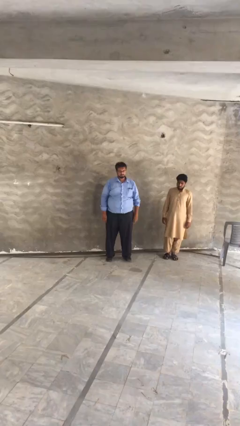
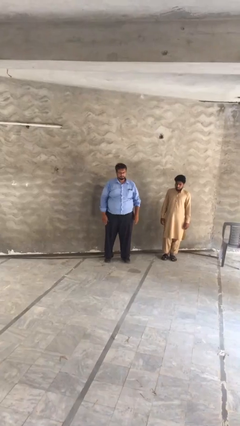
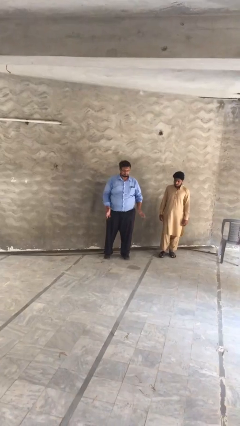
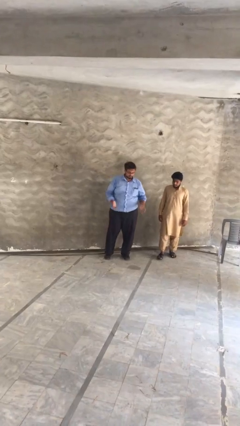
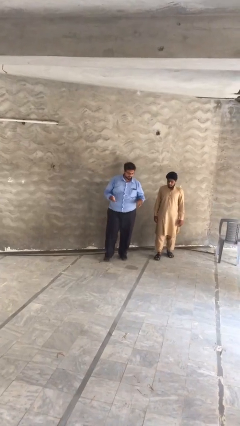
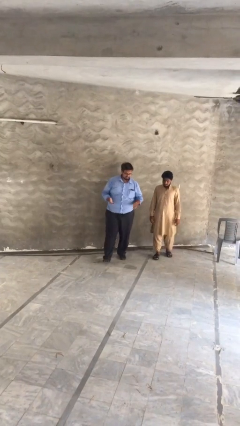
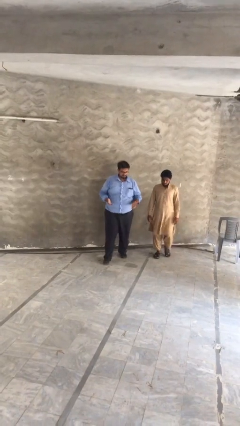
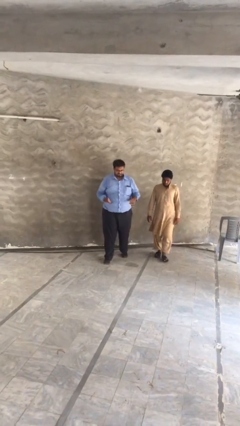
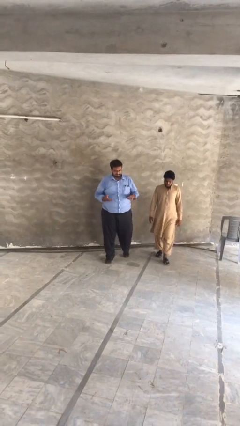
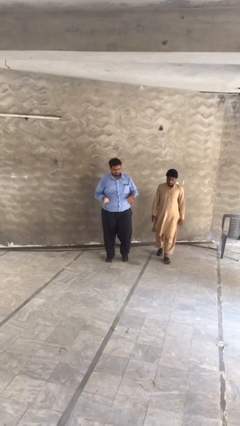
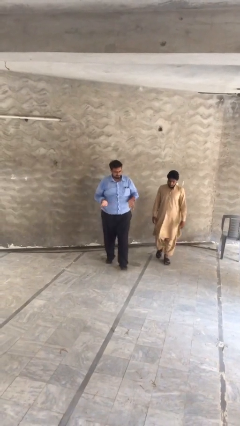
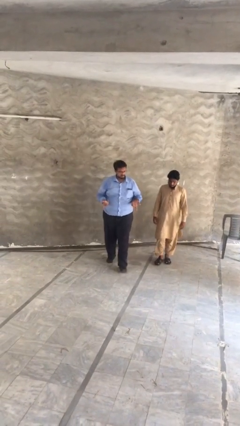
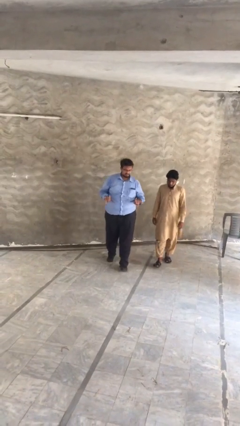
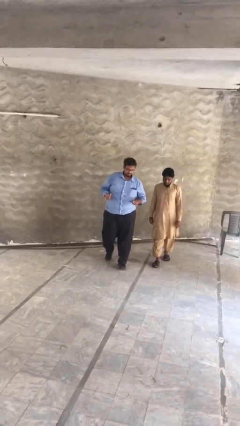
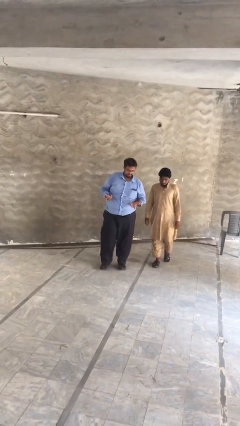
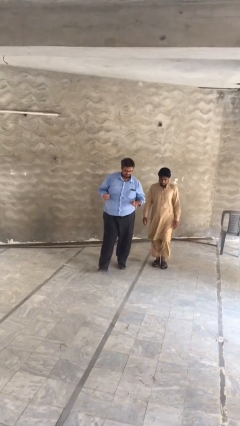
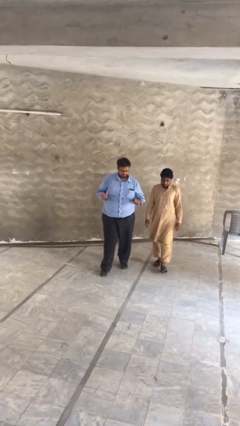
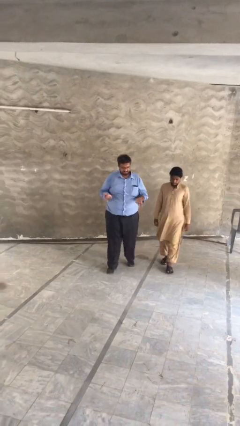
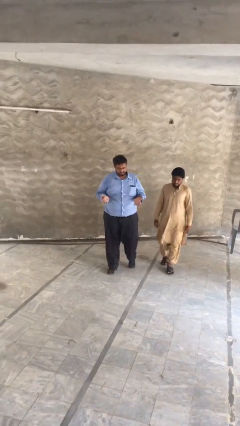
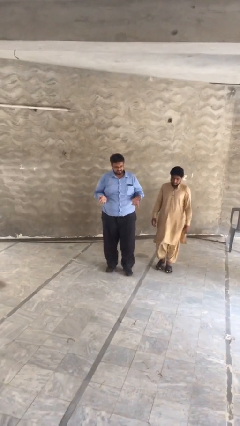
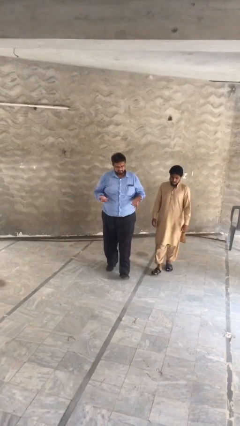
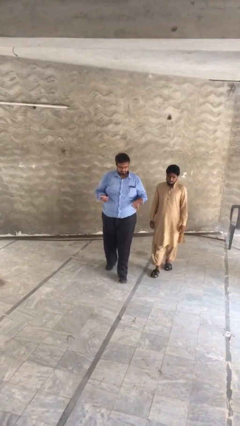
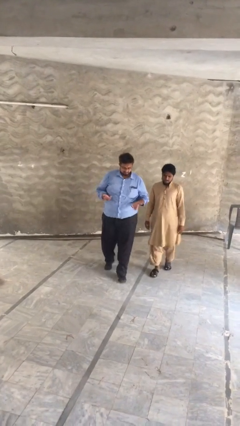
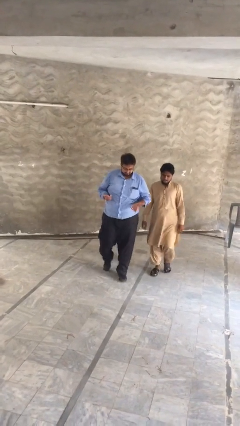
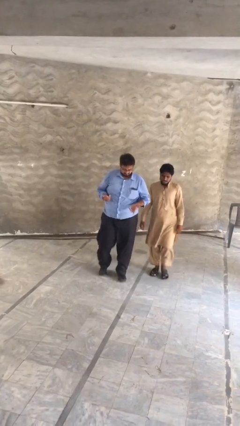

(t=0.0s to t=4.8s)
person talks to person

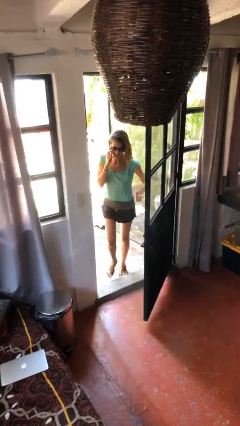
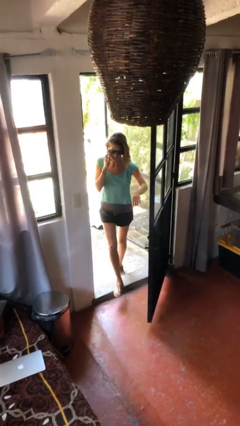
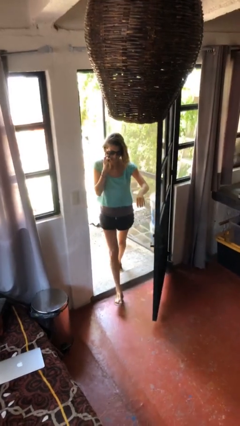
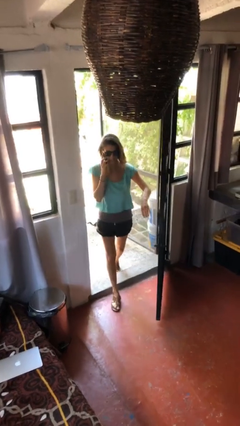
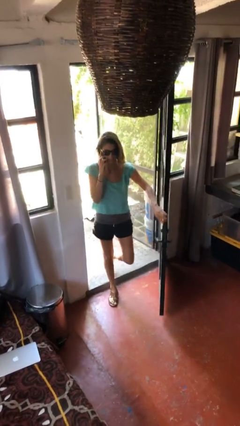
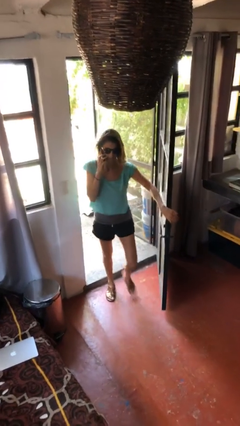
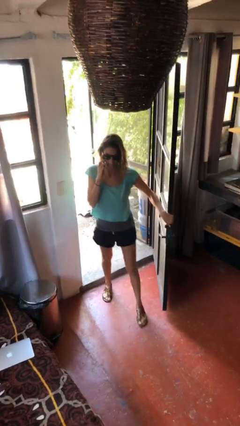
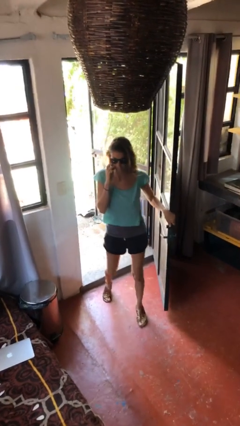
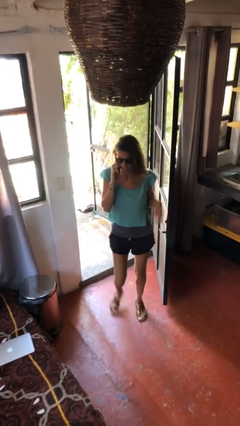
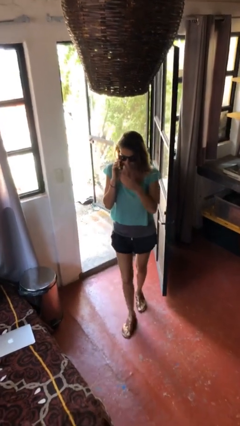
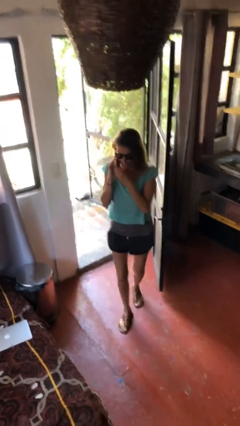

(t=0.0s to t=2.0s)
person enters scene through structure

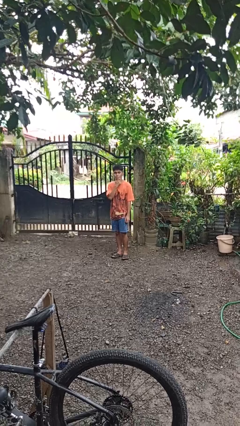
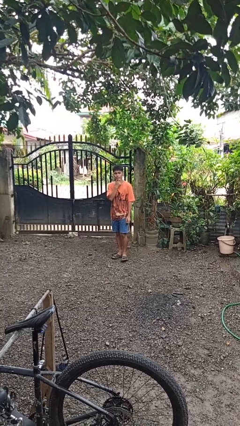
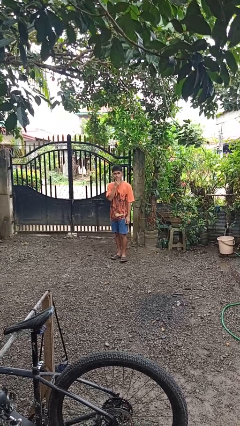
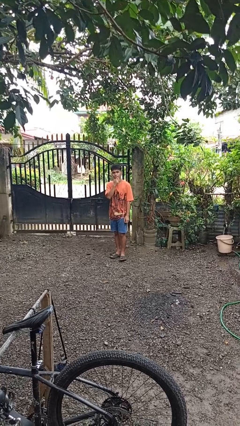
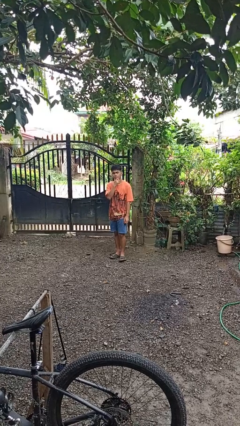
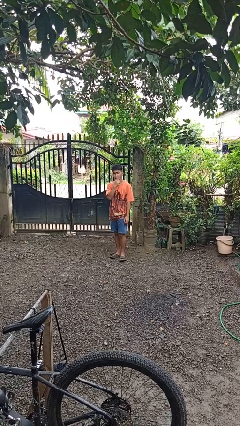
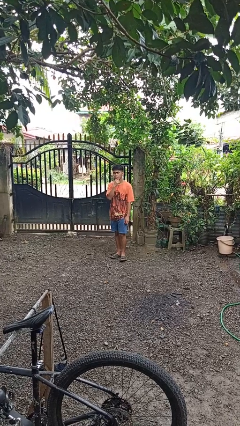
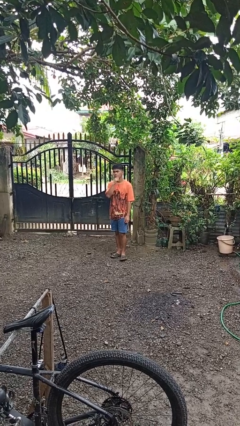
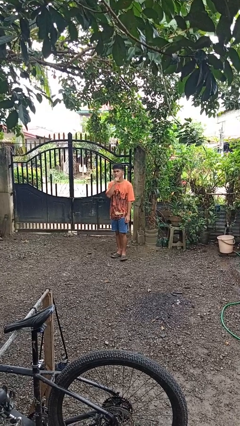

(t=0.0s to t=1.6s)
person strokes chin

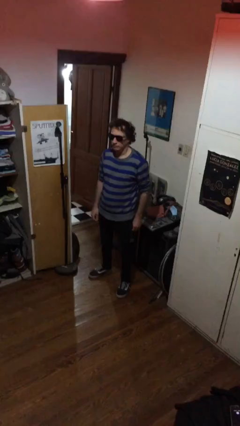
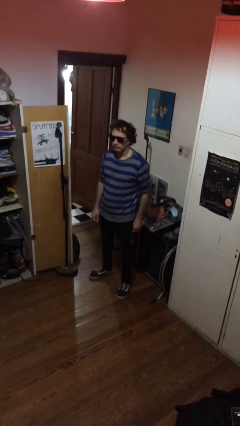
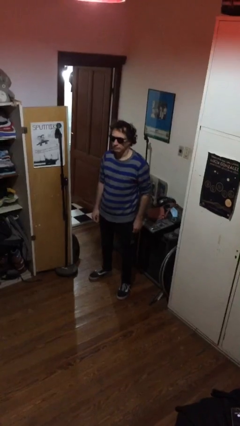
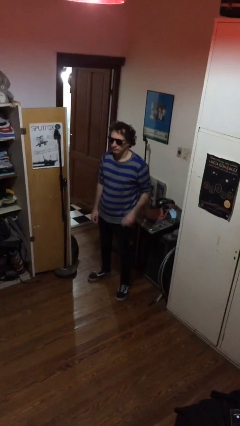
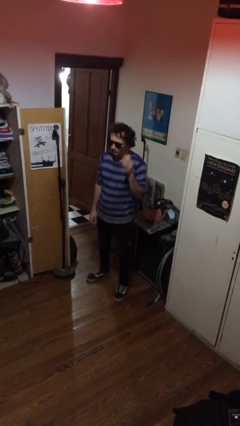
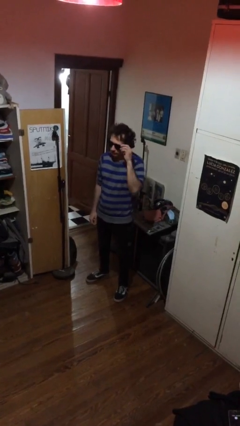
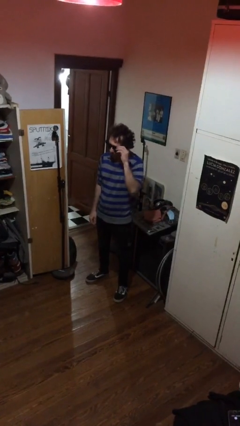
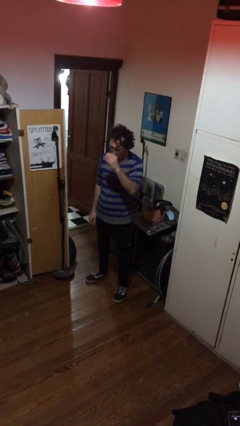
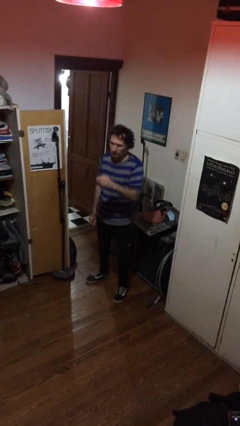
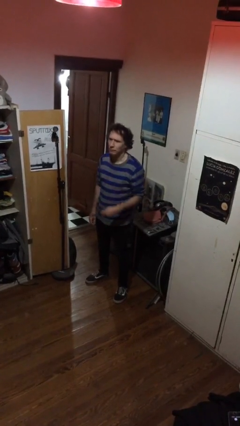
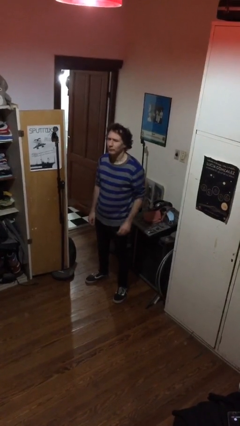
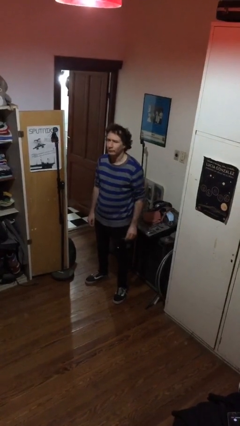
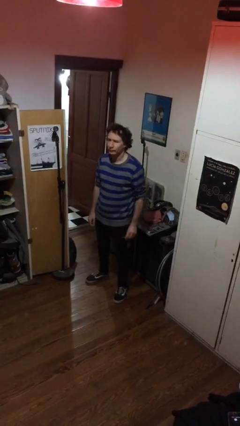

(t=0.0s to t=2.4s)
person takes off sunglasses

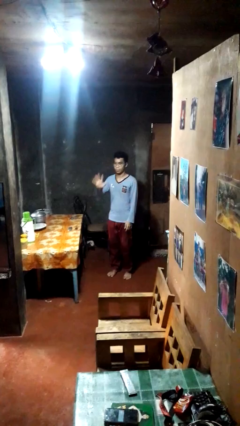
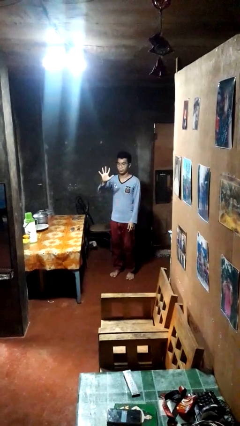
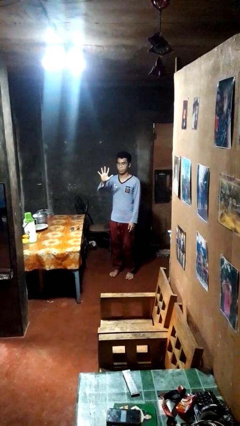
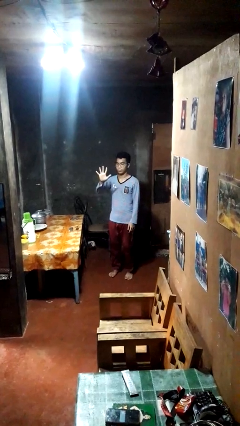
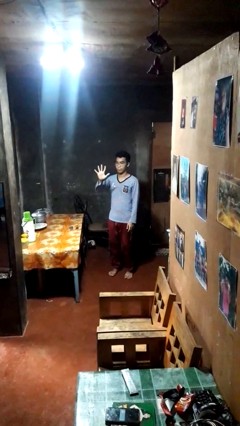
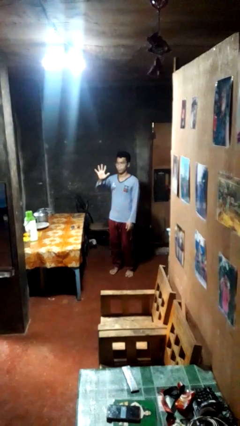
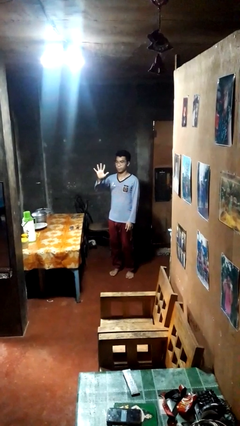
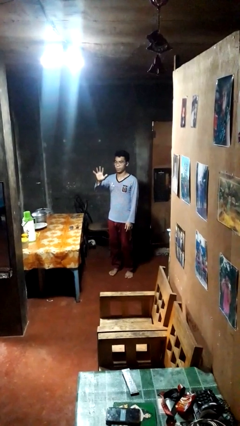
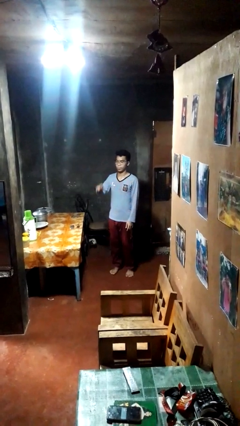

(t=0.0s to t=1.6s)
person gestures number five

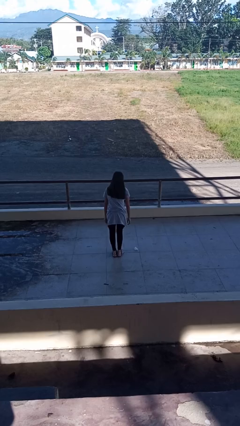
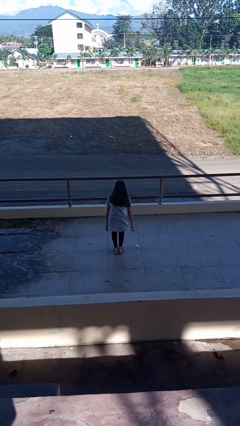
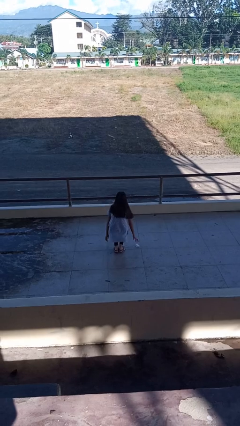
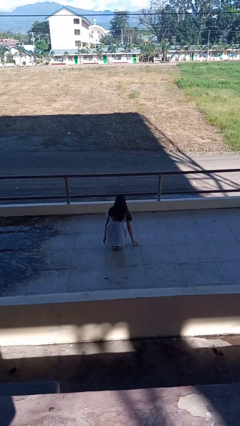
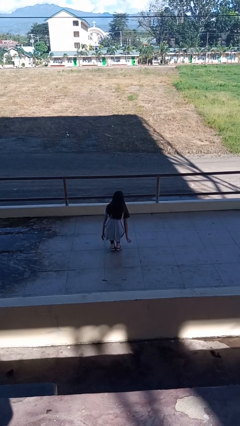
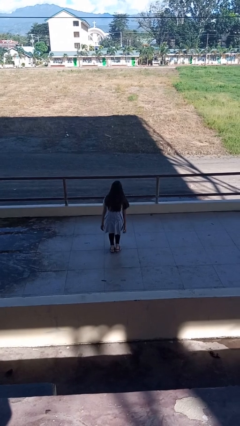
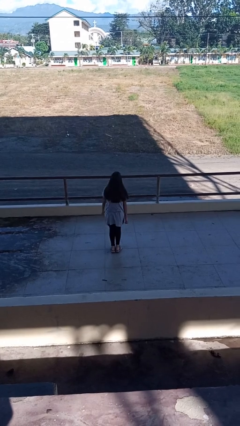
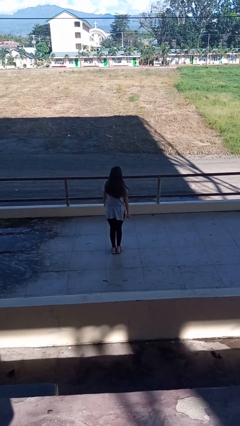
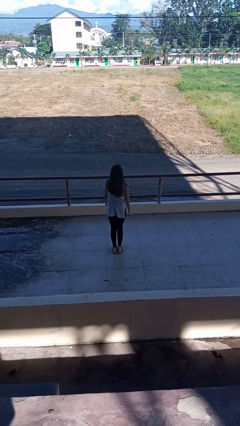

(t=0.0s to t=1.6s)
person picks up object from floor

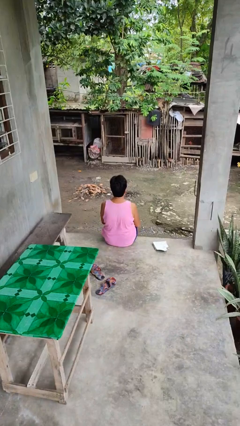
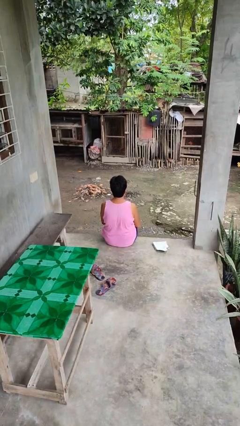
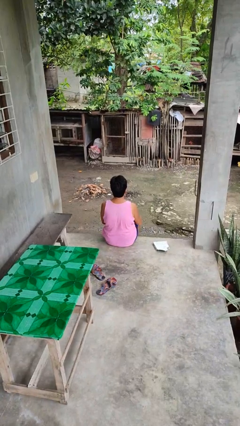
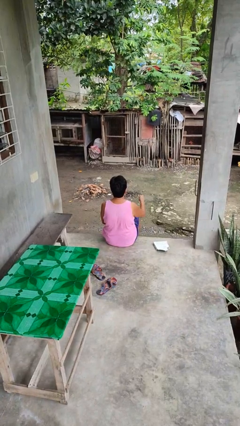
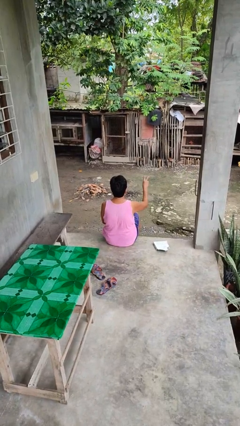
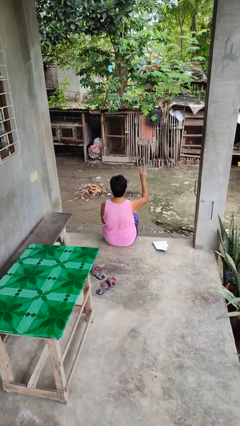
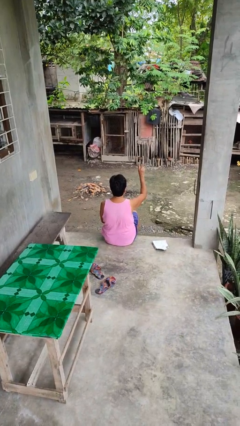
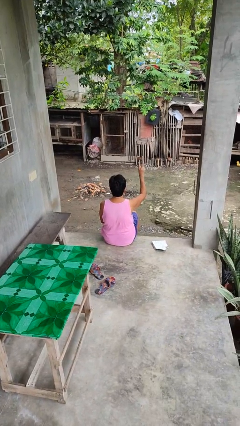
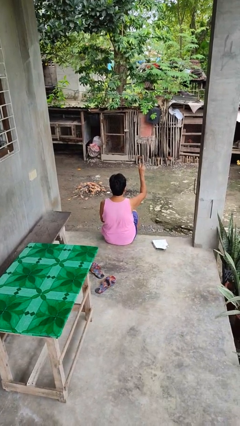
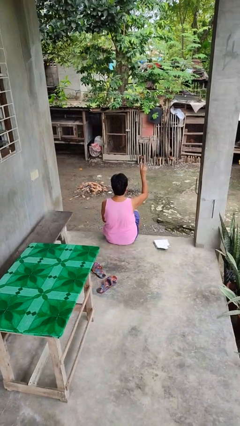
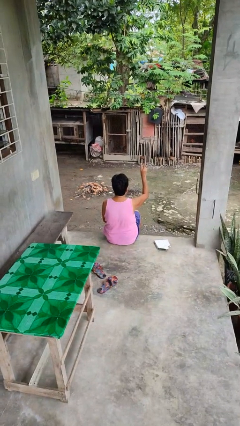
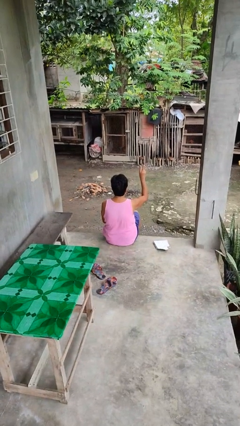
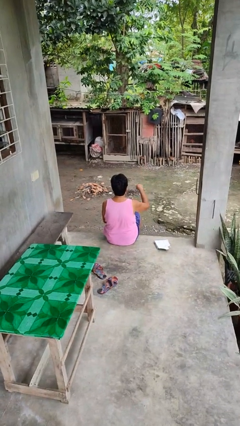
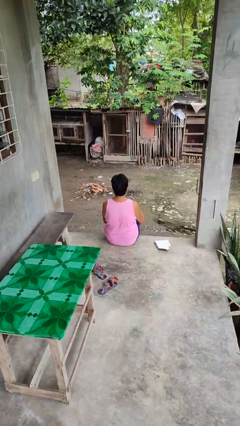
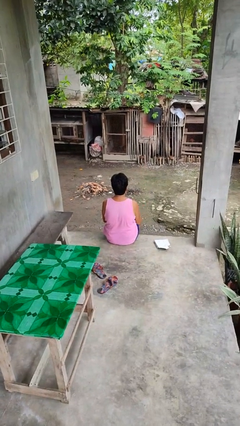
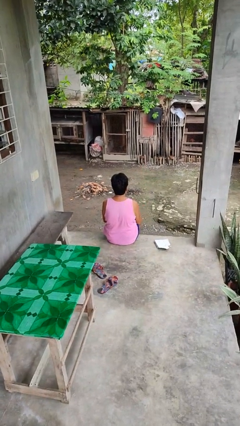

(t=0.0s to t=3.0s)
person gestures peace
